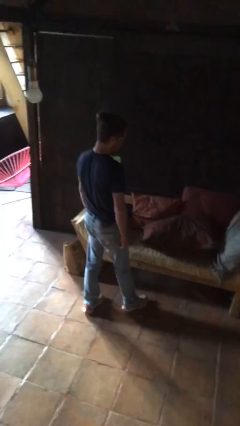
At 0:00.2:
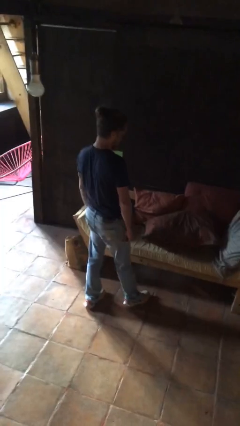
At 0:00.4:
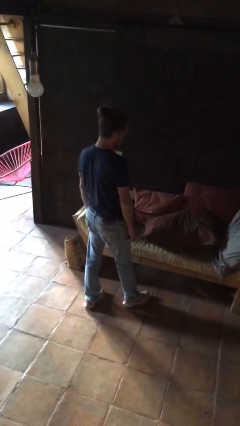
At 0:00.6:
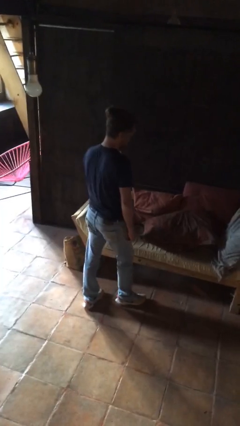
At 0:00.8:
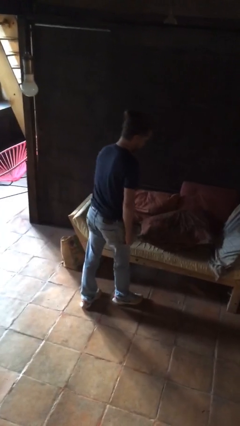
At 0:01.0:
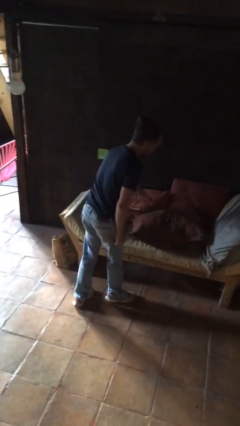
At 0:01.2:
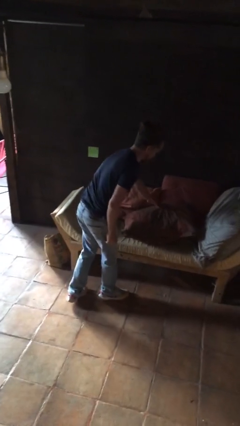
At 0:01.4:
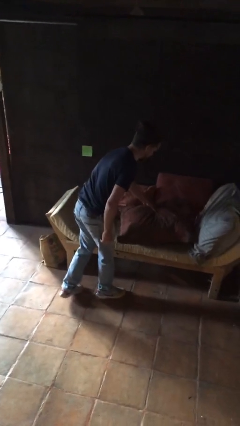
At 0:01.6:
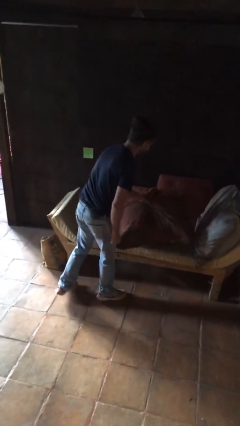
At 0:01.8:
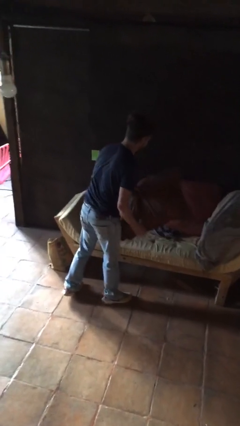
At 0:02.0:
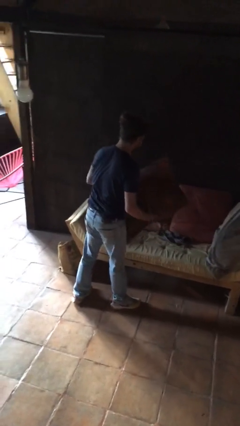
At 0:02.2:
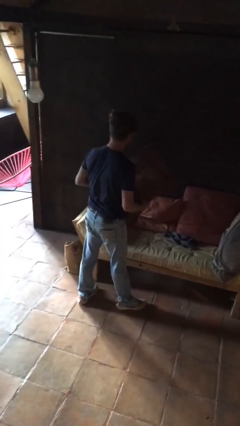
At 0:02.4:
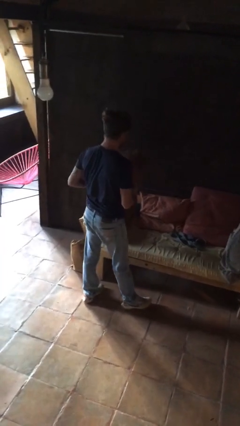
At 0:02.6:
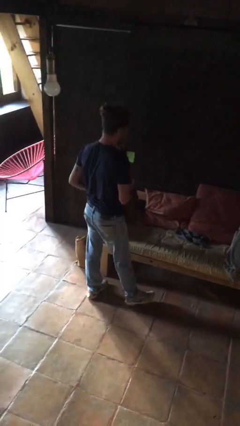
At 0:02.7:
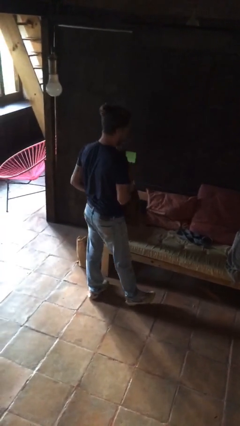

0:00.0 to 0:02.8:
person picks up object from couch

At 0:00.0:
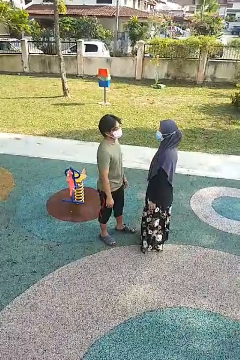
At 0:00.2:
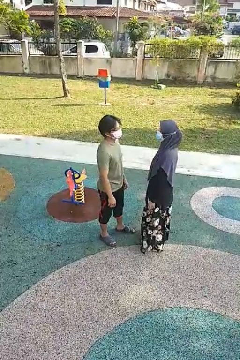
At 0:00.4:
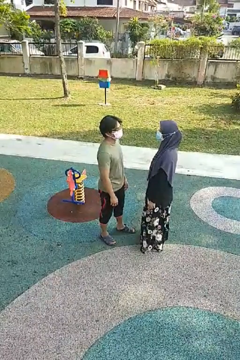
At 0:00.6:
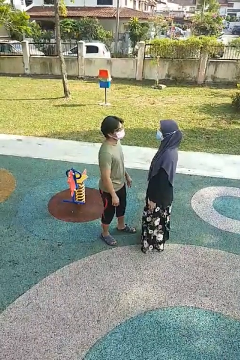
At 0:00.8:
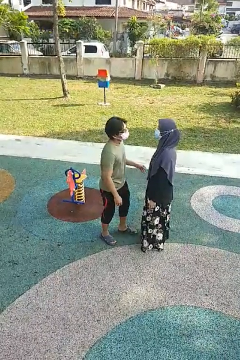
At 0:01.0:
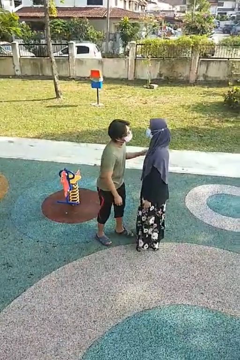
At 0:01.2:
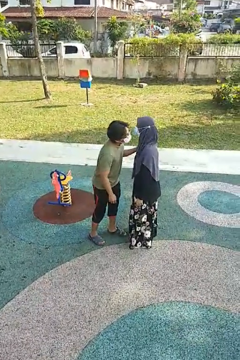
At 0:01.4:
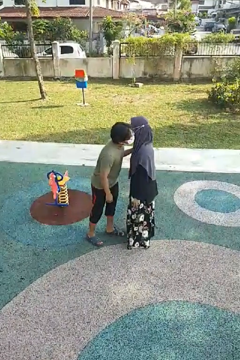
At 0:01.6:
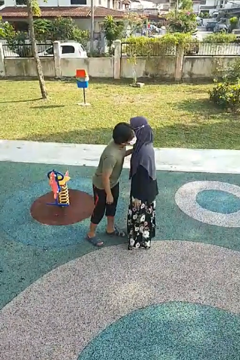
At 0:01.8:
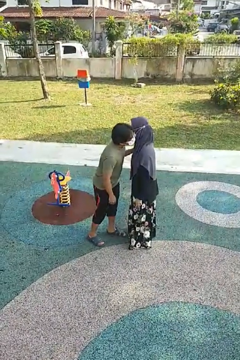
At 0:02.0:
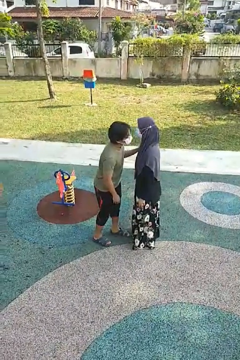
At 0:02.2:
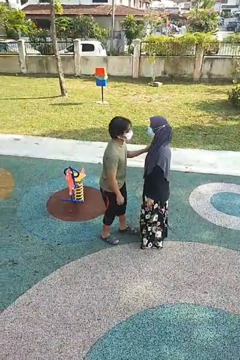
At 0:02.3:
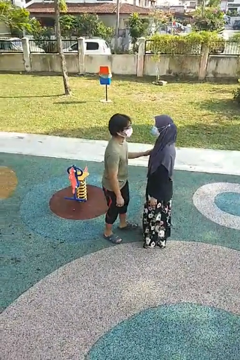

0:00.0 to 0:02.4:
person kisses cheek of person

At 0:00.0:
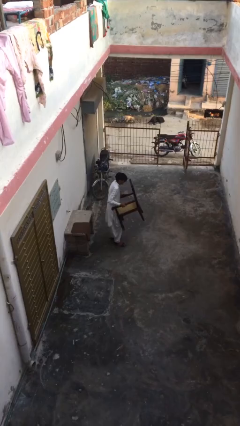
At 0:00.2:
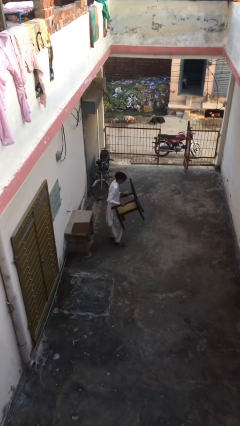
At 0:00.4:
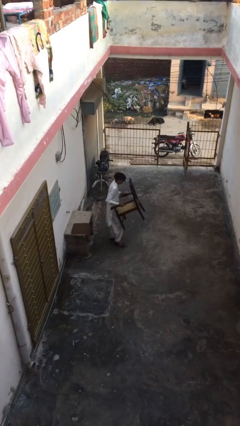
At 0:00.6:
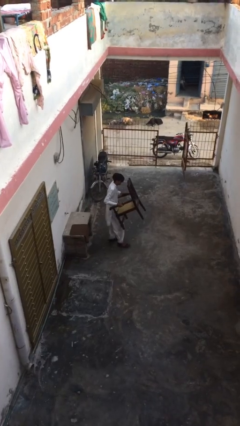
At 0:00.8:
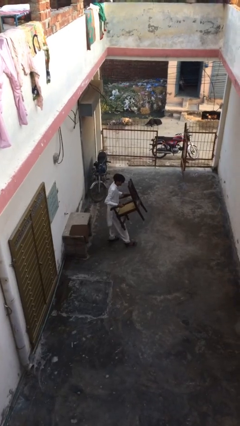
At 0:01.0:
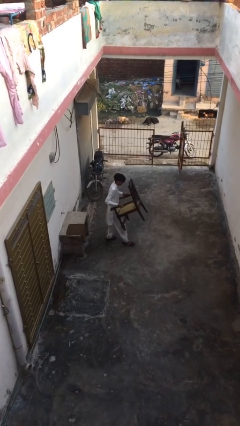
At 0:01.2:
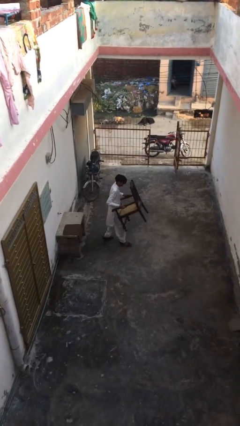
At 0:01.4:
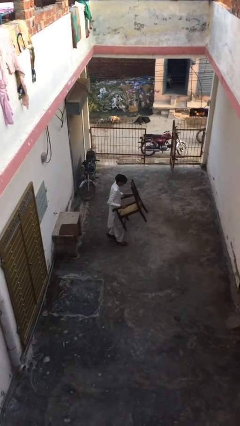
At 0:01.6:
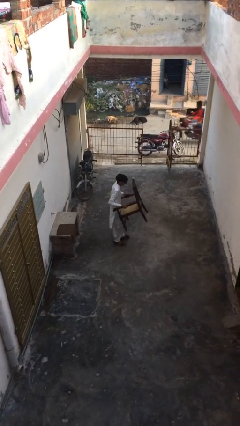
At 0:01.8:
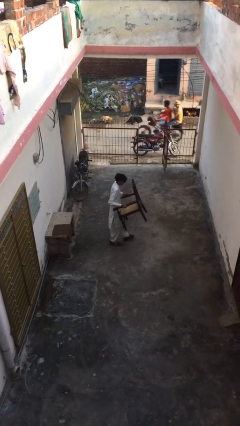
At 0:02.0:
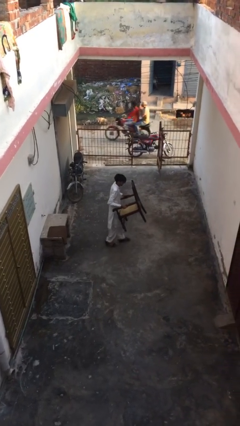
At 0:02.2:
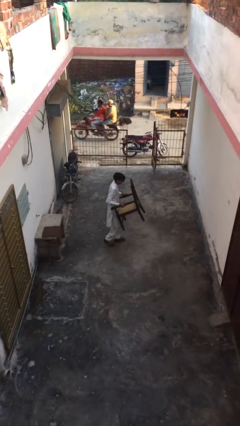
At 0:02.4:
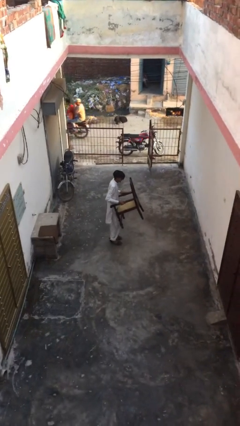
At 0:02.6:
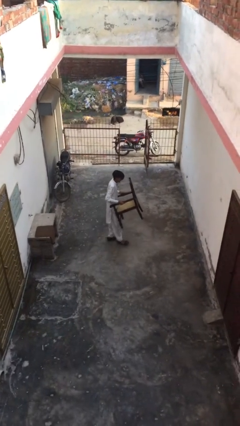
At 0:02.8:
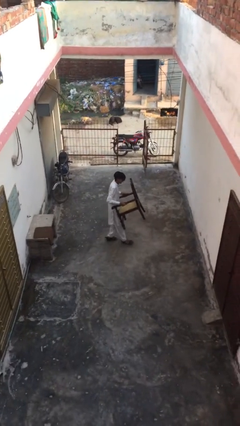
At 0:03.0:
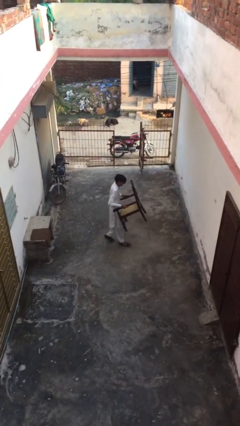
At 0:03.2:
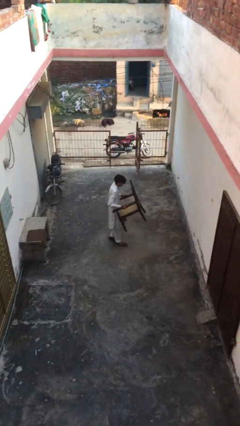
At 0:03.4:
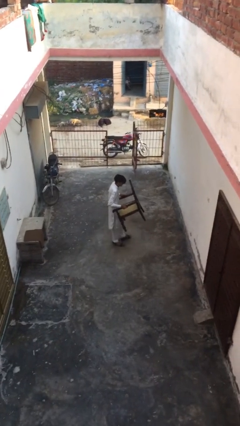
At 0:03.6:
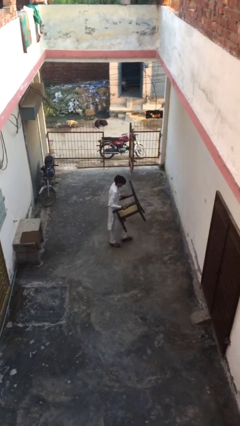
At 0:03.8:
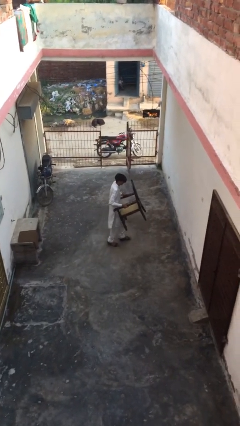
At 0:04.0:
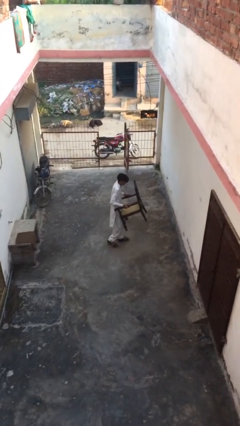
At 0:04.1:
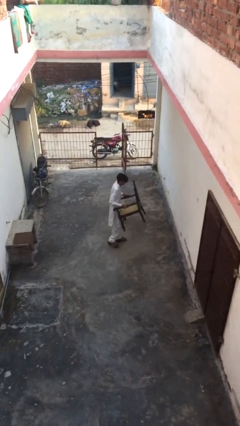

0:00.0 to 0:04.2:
person carries heavy object

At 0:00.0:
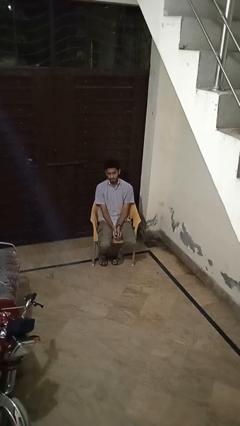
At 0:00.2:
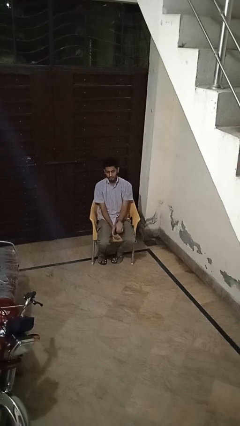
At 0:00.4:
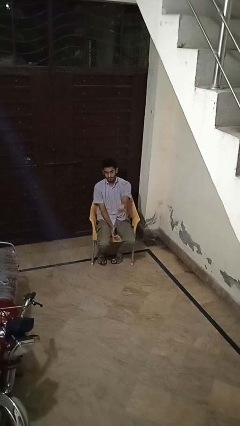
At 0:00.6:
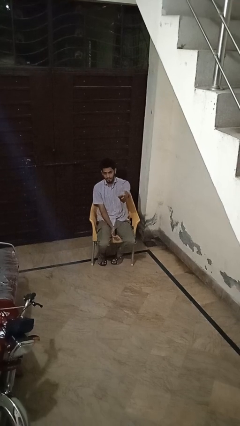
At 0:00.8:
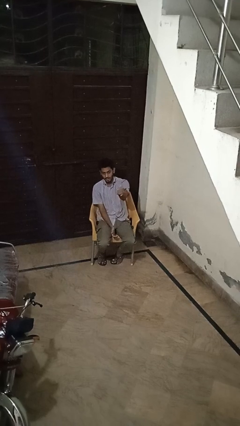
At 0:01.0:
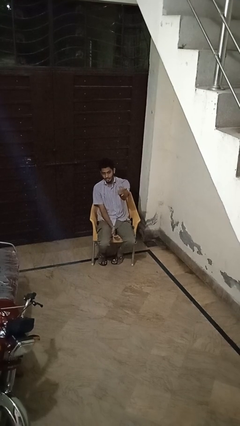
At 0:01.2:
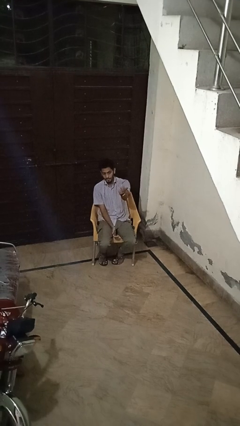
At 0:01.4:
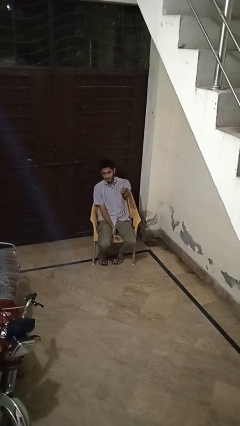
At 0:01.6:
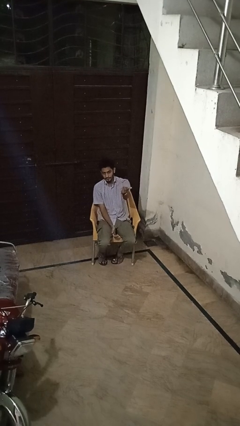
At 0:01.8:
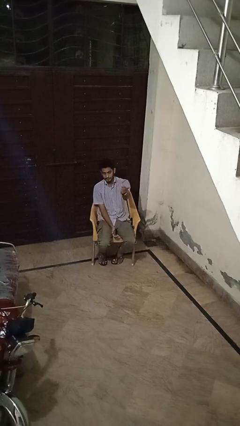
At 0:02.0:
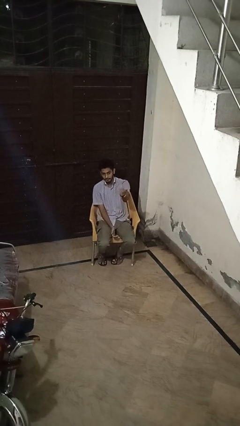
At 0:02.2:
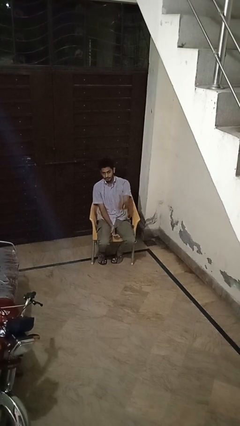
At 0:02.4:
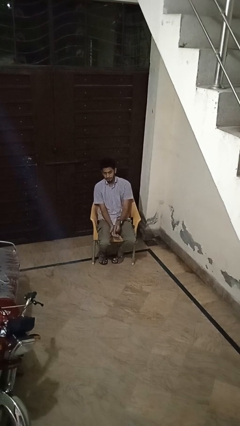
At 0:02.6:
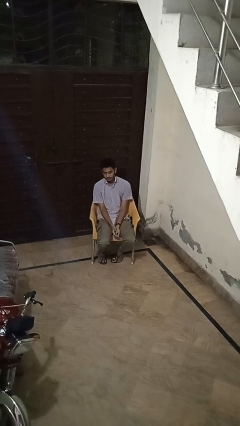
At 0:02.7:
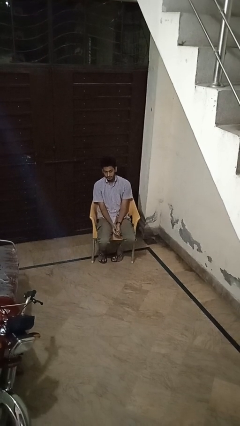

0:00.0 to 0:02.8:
person gestures come here

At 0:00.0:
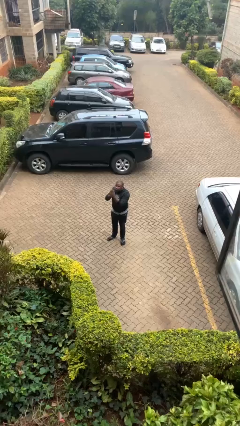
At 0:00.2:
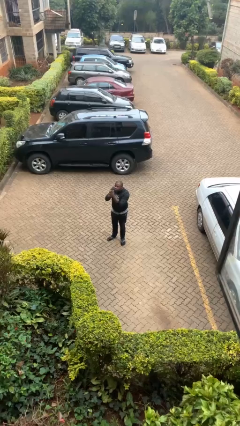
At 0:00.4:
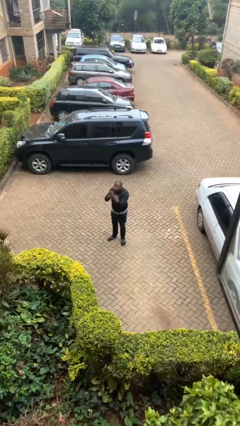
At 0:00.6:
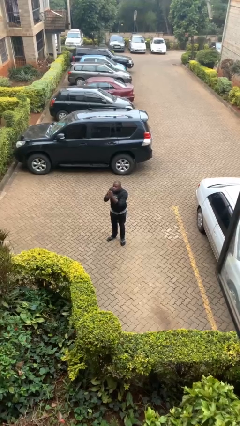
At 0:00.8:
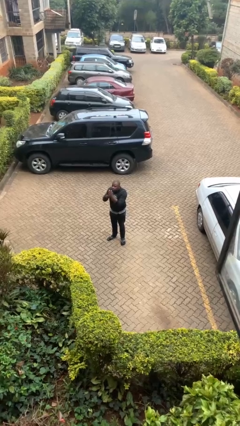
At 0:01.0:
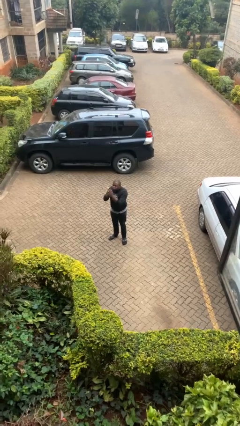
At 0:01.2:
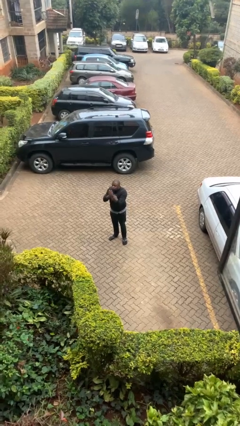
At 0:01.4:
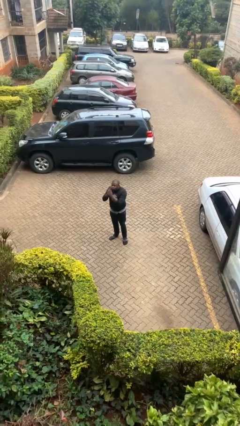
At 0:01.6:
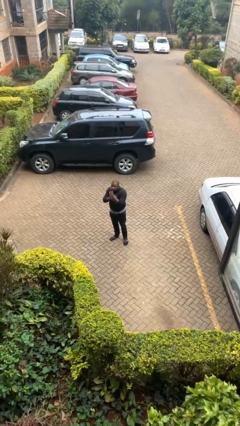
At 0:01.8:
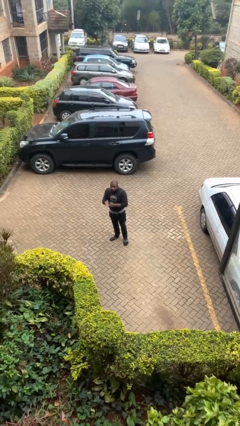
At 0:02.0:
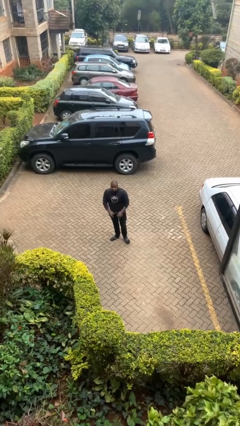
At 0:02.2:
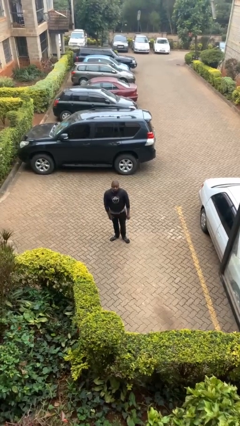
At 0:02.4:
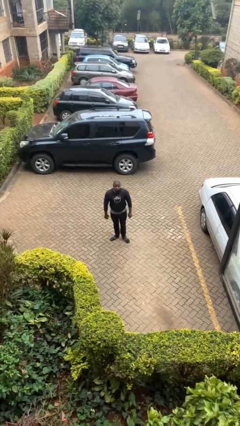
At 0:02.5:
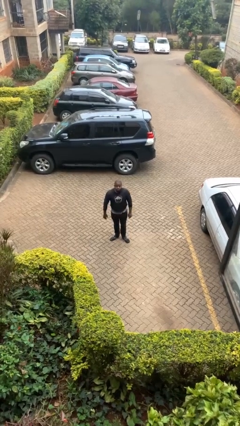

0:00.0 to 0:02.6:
person blows into hands

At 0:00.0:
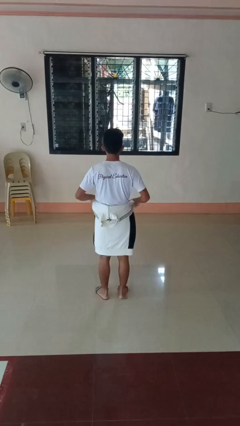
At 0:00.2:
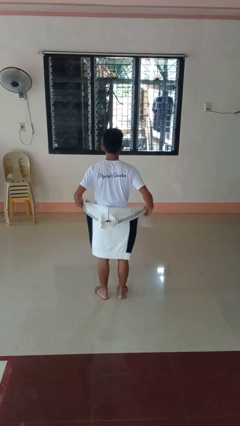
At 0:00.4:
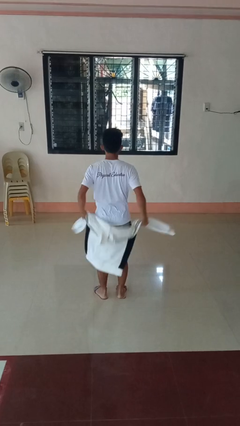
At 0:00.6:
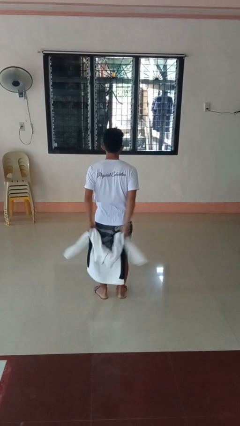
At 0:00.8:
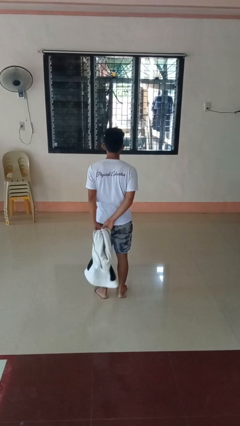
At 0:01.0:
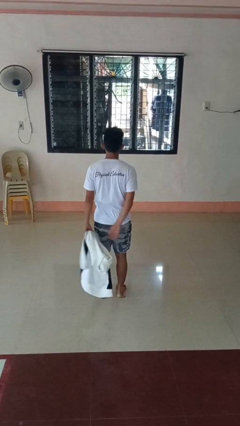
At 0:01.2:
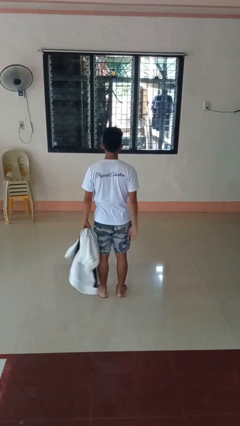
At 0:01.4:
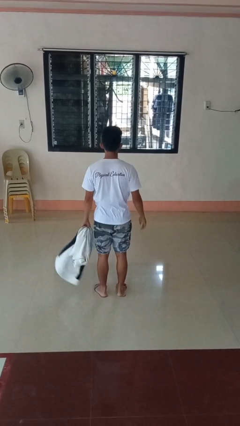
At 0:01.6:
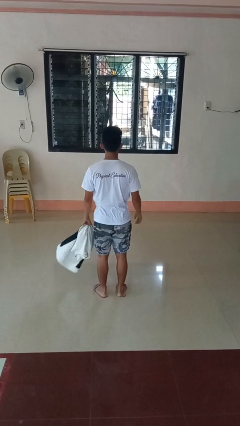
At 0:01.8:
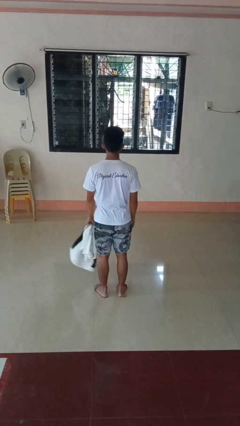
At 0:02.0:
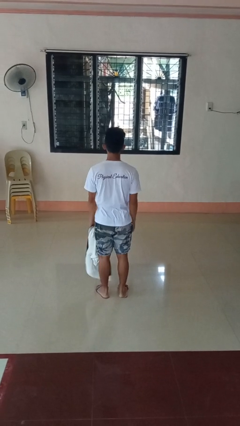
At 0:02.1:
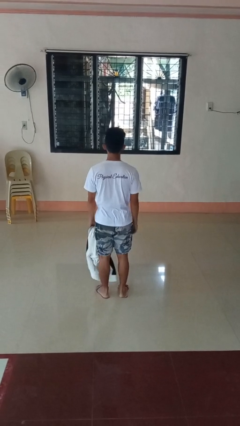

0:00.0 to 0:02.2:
person unties jacket around waist

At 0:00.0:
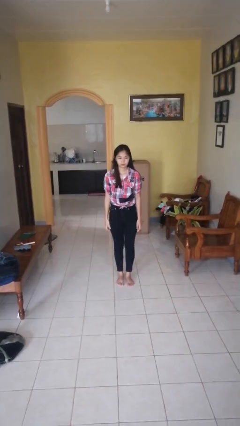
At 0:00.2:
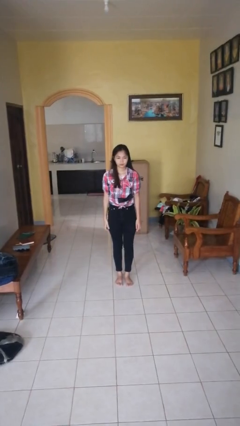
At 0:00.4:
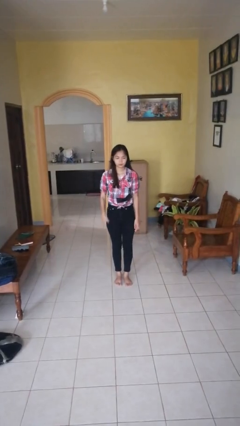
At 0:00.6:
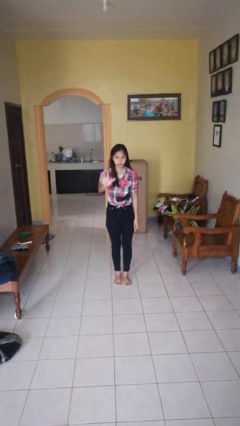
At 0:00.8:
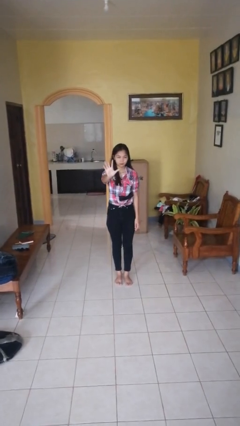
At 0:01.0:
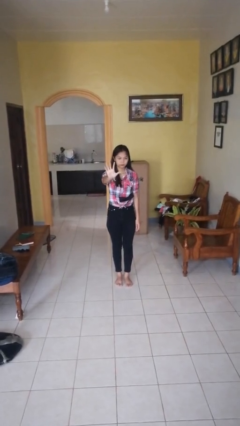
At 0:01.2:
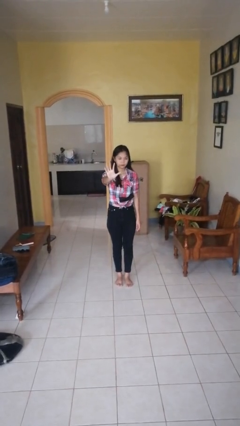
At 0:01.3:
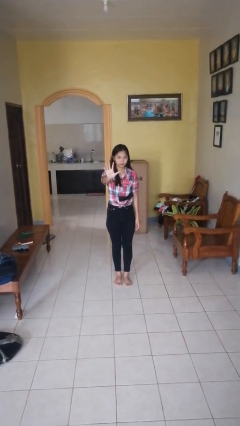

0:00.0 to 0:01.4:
person gestures number five
